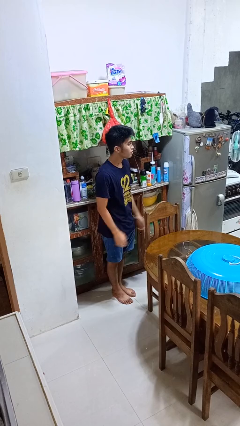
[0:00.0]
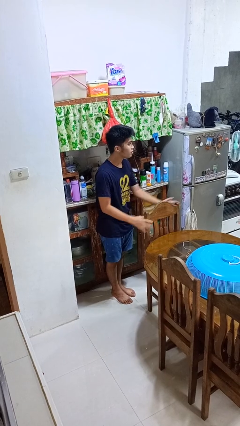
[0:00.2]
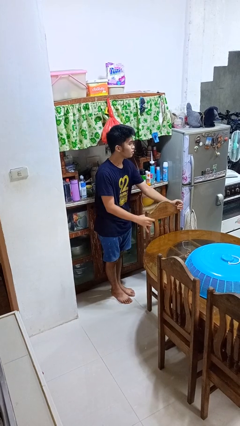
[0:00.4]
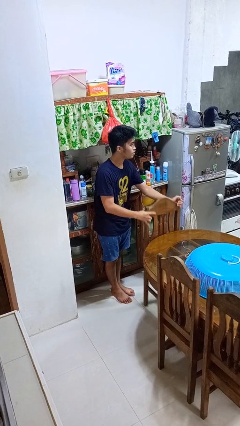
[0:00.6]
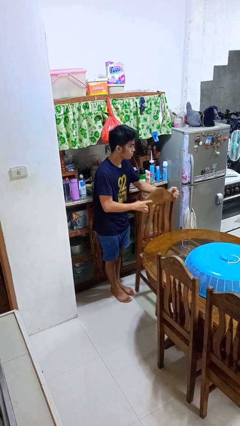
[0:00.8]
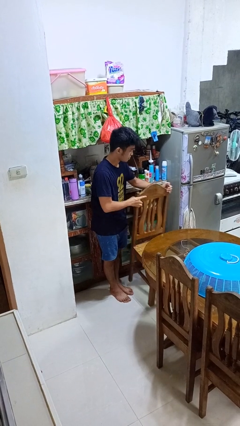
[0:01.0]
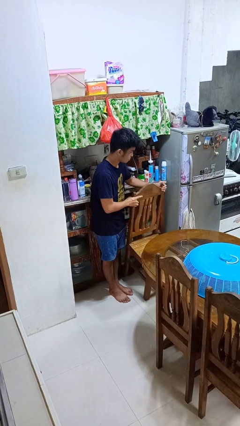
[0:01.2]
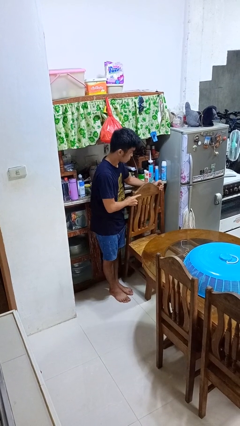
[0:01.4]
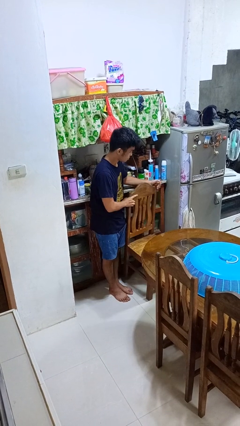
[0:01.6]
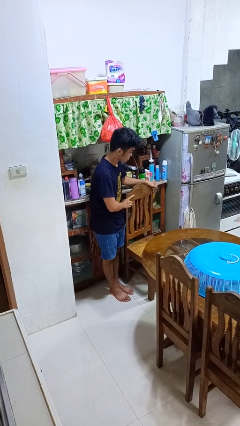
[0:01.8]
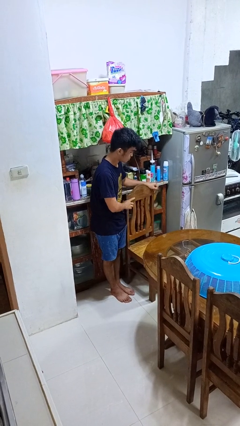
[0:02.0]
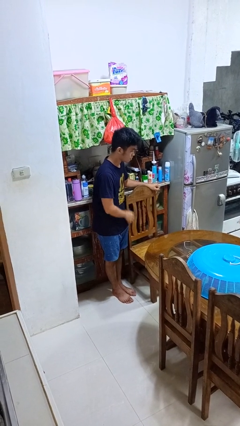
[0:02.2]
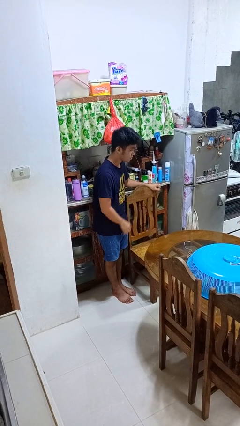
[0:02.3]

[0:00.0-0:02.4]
person pulls out chair

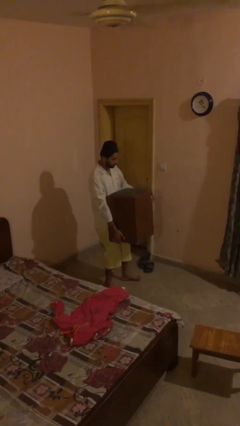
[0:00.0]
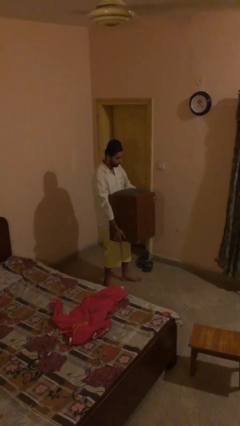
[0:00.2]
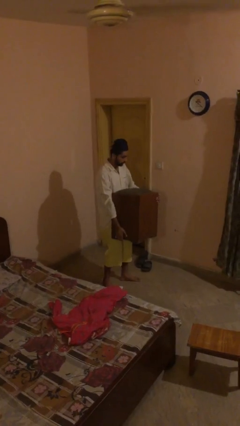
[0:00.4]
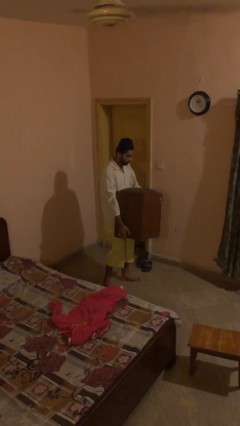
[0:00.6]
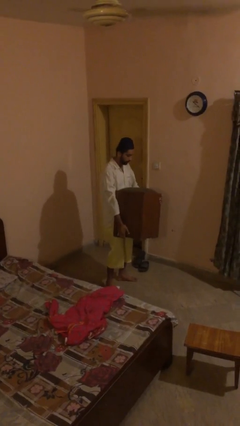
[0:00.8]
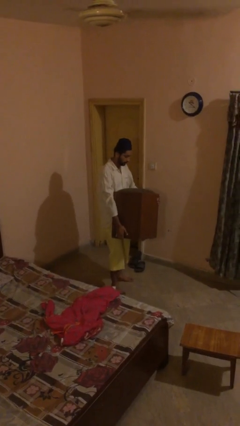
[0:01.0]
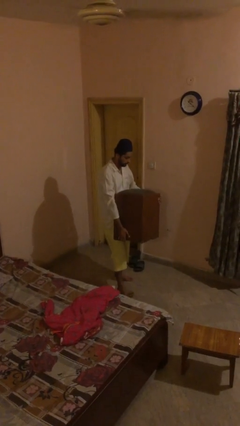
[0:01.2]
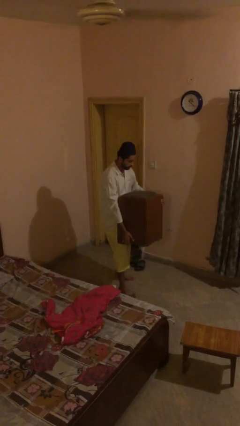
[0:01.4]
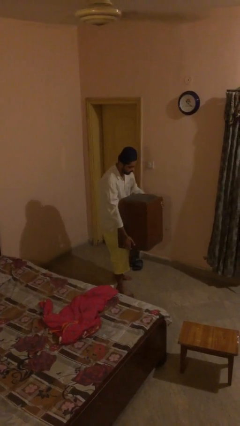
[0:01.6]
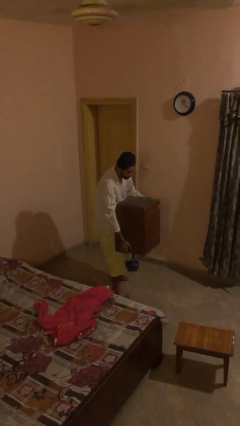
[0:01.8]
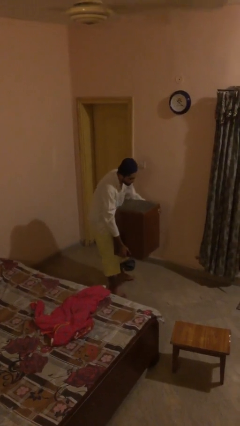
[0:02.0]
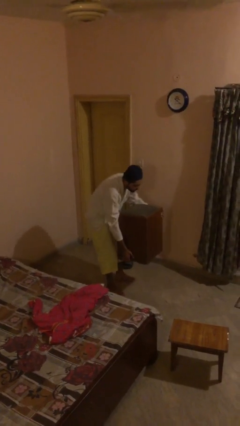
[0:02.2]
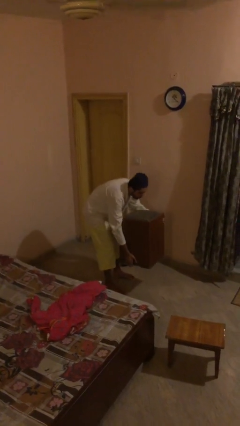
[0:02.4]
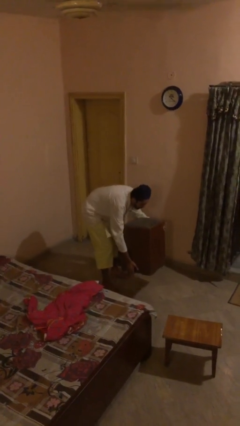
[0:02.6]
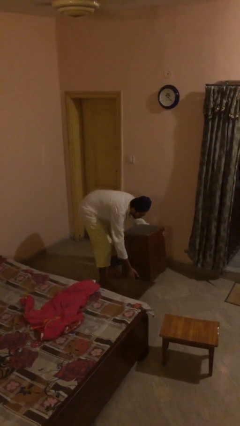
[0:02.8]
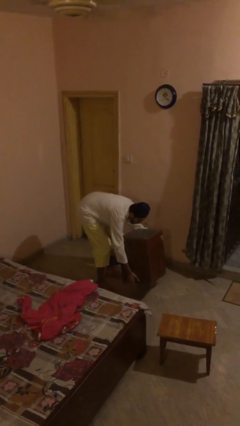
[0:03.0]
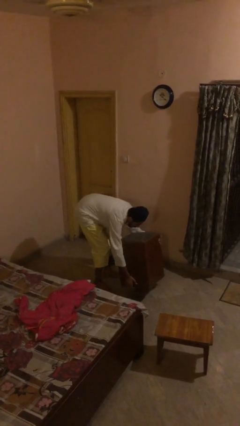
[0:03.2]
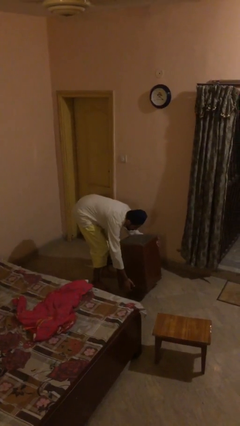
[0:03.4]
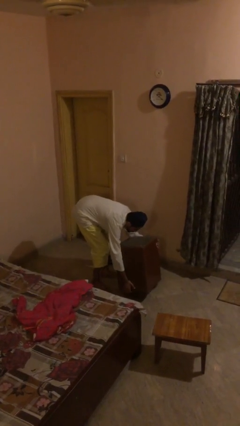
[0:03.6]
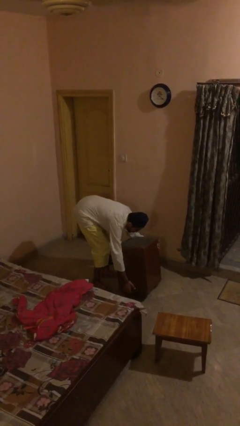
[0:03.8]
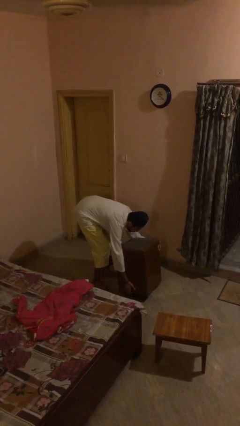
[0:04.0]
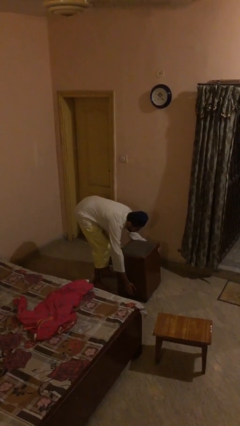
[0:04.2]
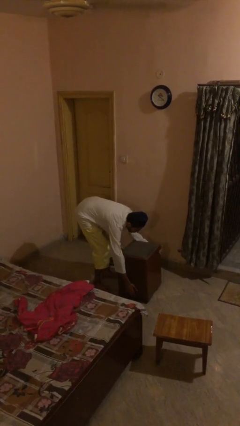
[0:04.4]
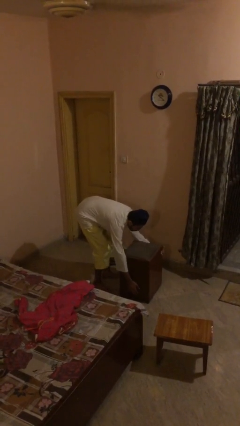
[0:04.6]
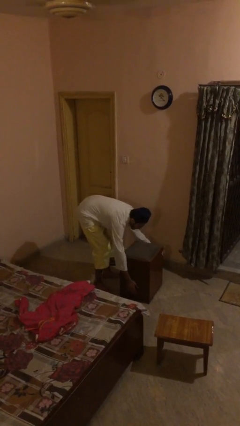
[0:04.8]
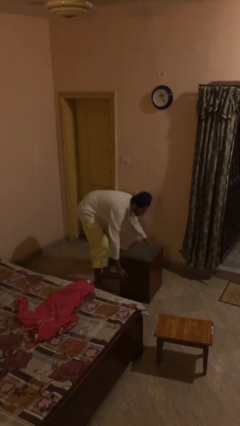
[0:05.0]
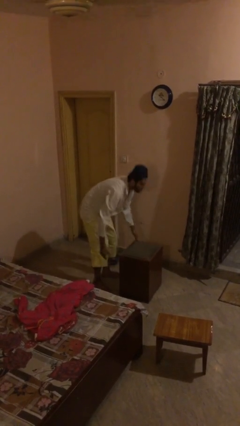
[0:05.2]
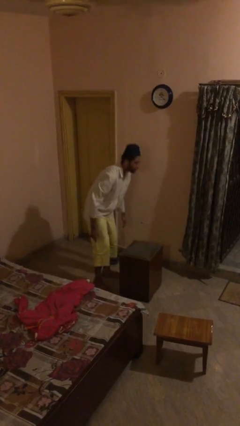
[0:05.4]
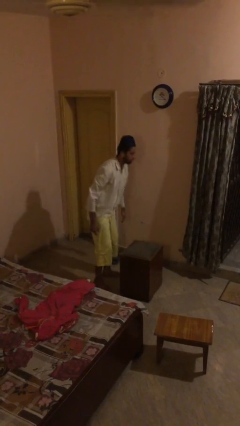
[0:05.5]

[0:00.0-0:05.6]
person puts down object on floor

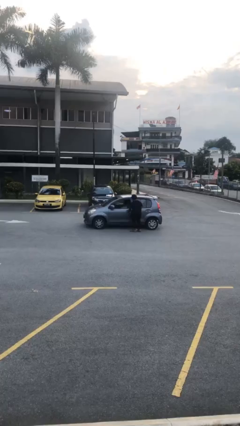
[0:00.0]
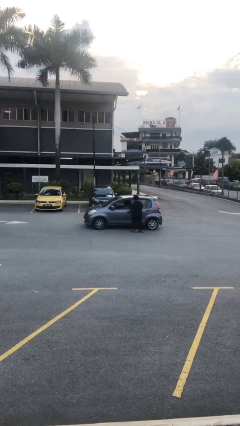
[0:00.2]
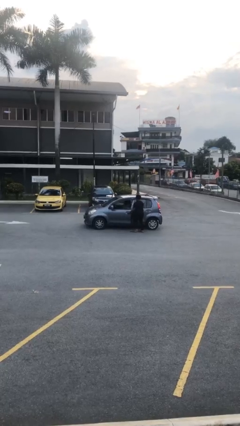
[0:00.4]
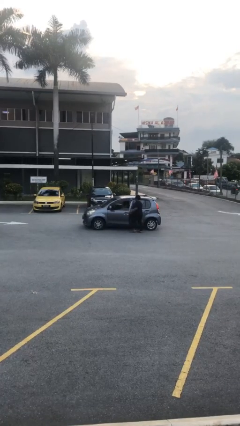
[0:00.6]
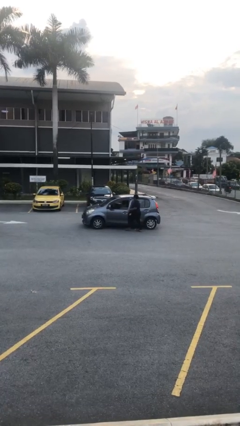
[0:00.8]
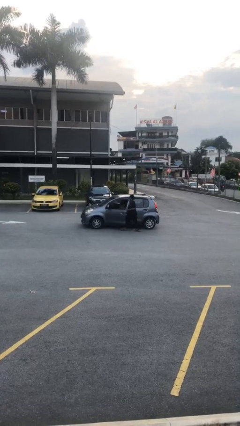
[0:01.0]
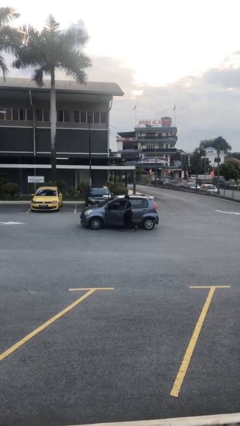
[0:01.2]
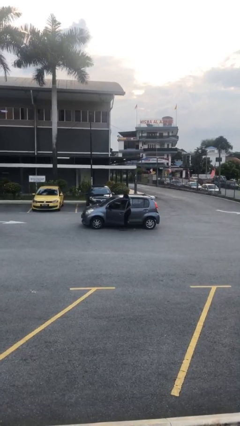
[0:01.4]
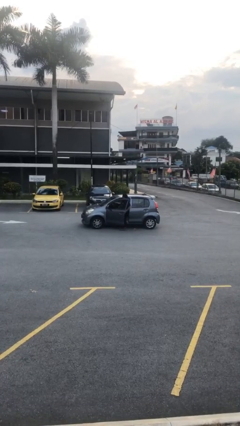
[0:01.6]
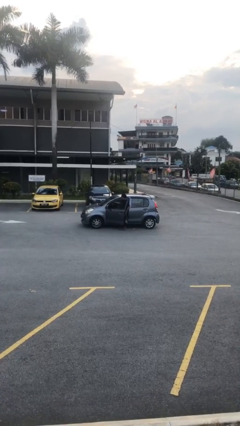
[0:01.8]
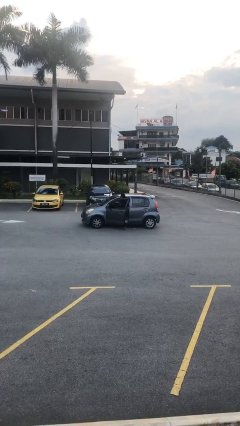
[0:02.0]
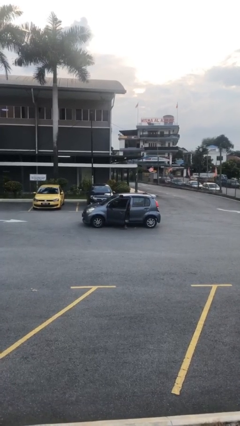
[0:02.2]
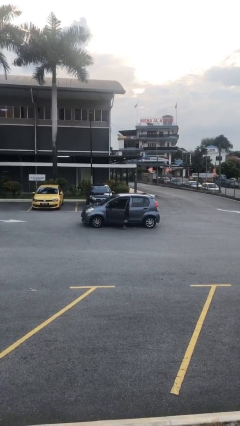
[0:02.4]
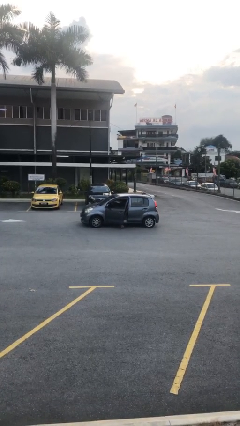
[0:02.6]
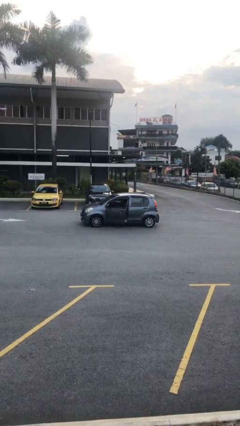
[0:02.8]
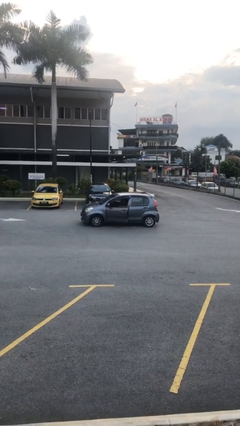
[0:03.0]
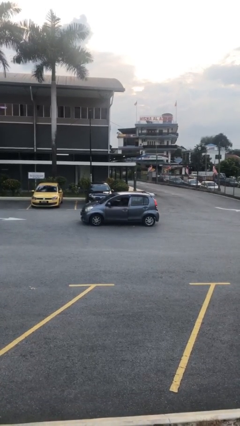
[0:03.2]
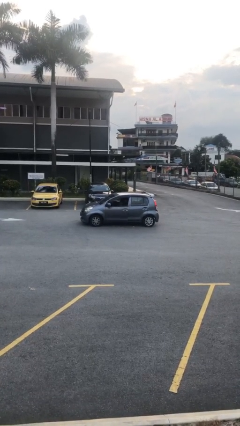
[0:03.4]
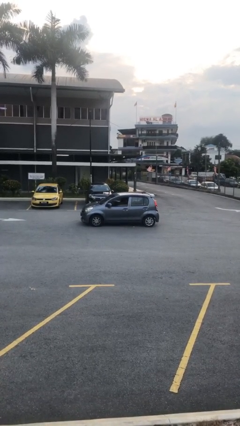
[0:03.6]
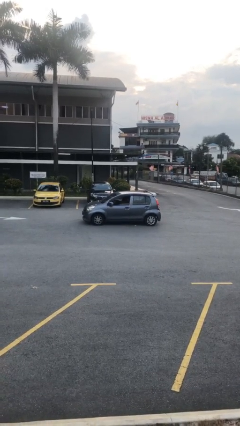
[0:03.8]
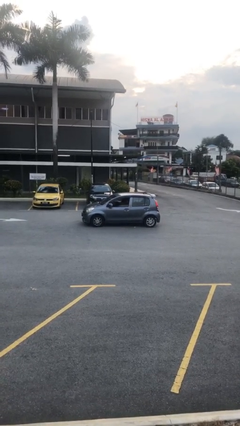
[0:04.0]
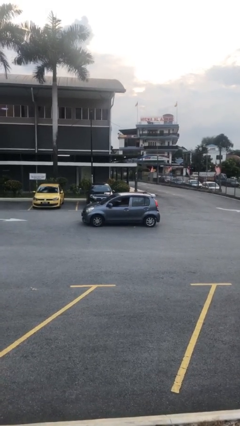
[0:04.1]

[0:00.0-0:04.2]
car picks up person

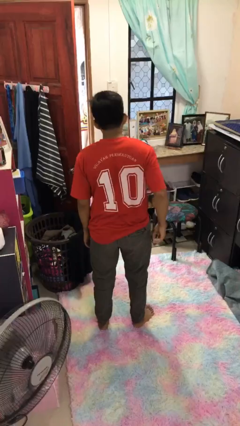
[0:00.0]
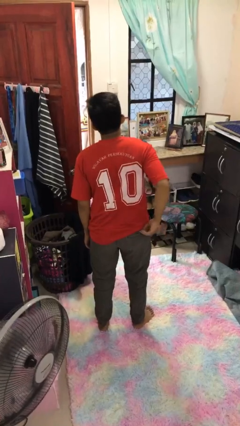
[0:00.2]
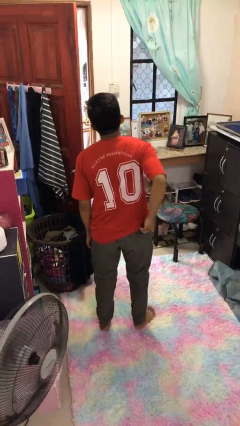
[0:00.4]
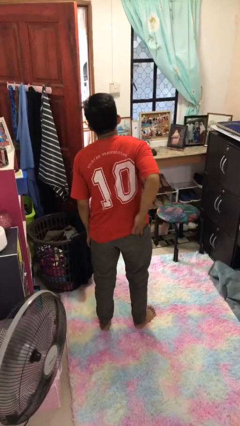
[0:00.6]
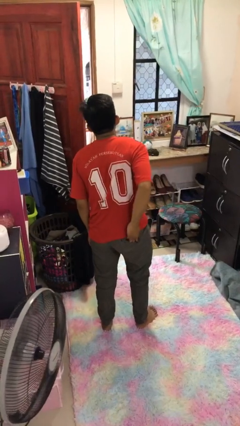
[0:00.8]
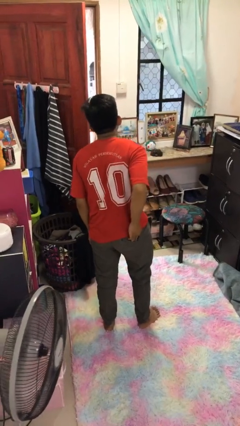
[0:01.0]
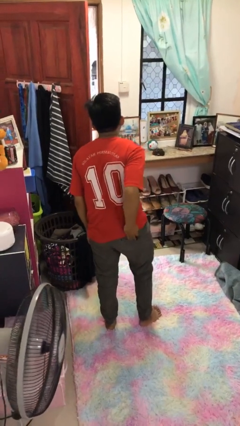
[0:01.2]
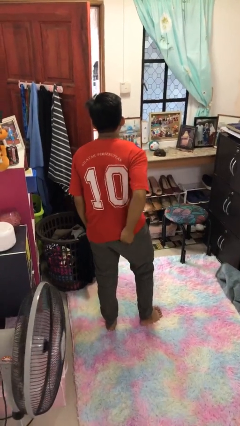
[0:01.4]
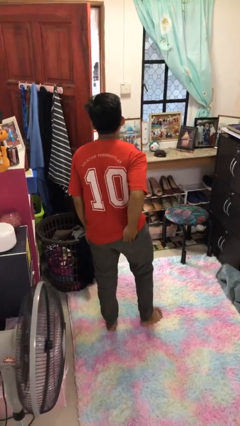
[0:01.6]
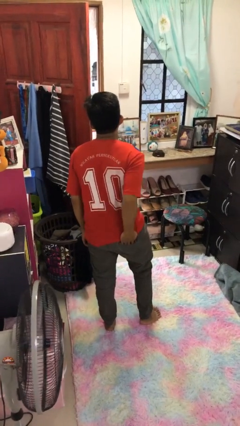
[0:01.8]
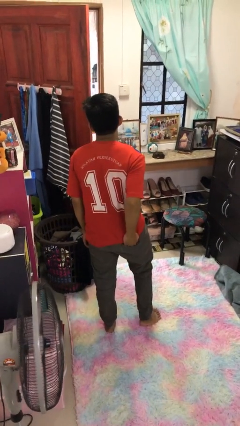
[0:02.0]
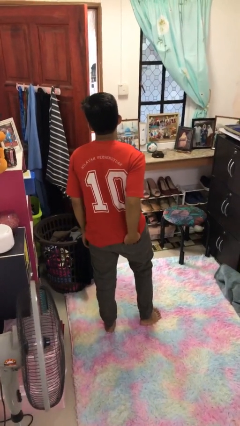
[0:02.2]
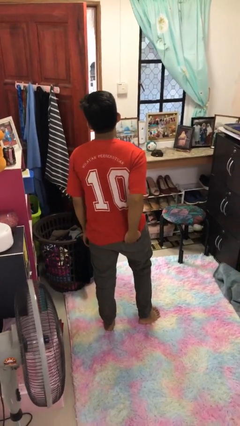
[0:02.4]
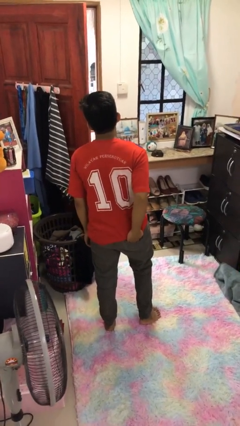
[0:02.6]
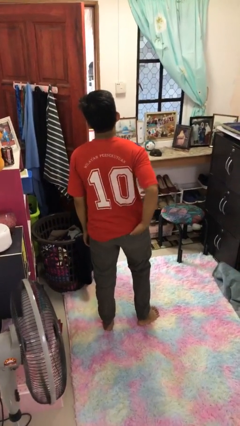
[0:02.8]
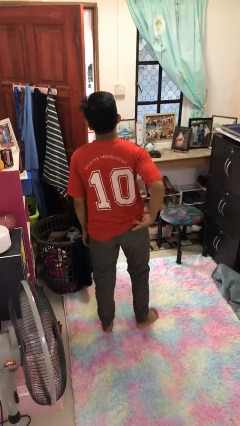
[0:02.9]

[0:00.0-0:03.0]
person puts hands in back pockets

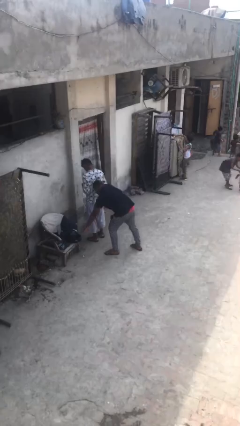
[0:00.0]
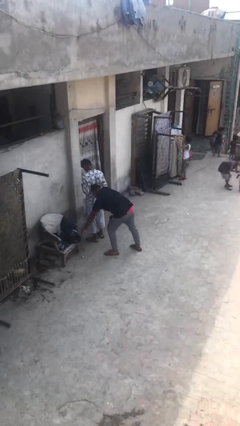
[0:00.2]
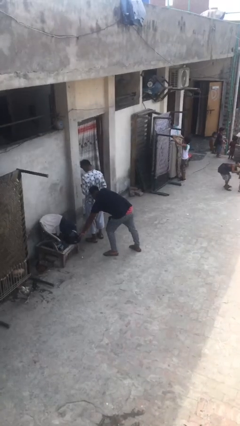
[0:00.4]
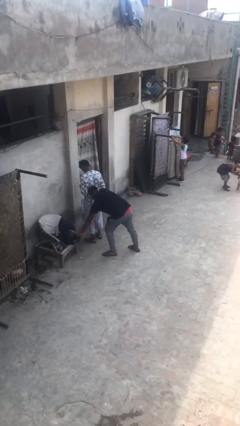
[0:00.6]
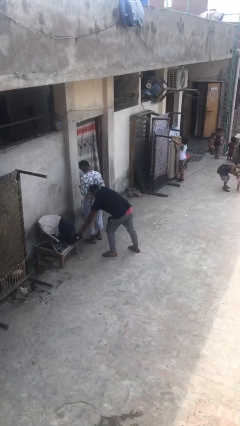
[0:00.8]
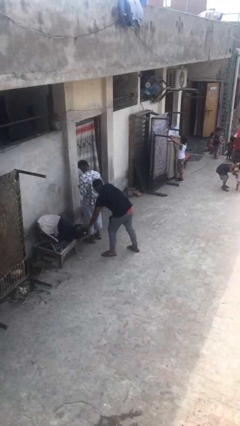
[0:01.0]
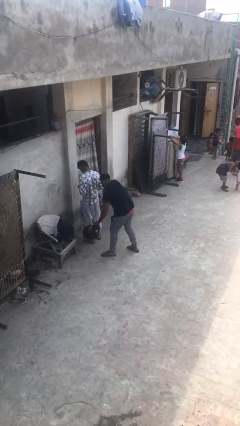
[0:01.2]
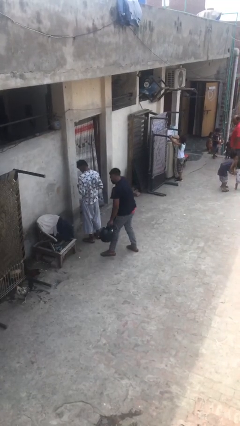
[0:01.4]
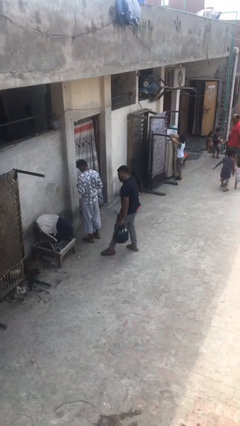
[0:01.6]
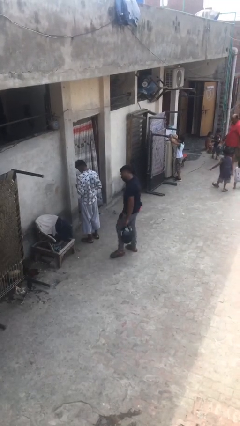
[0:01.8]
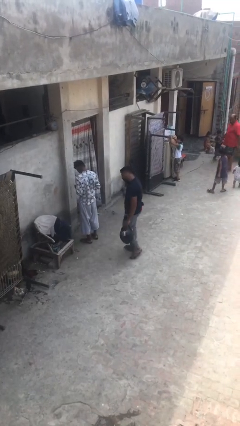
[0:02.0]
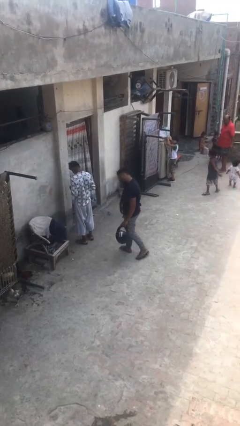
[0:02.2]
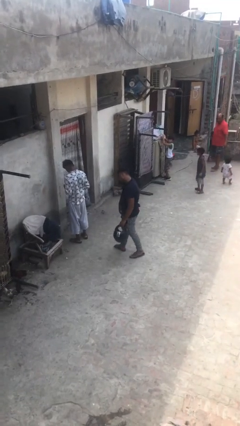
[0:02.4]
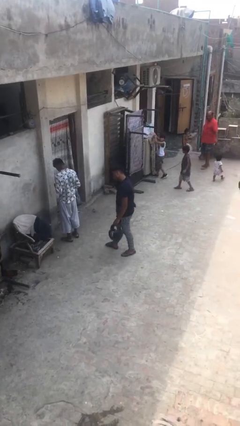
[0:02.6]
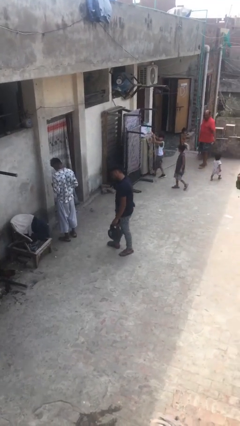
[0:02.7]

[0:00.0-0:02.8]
person steals object from person
